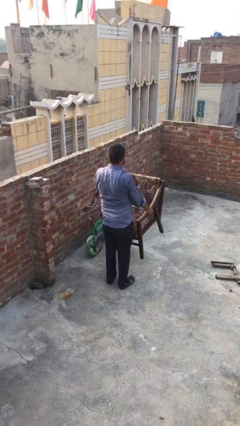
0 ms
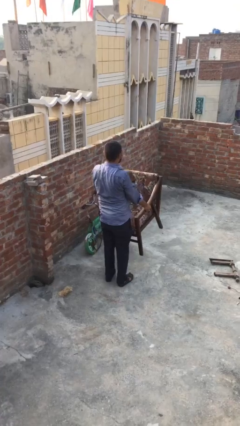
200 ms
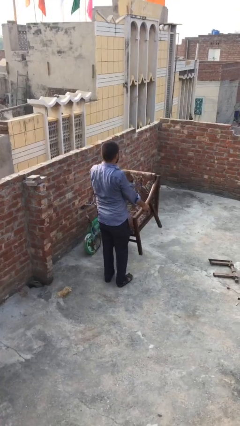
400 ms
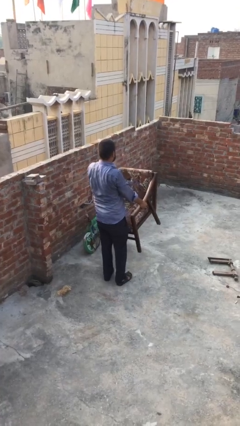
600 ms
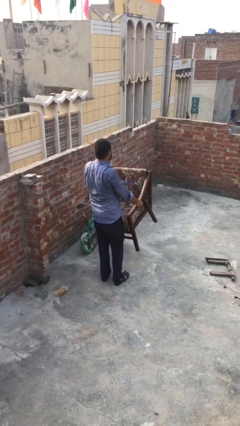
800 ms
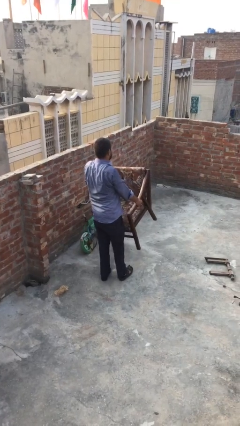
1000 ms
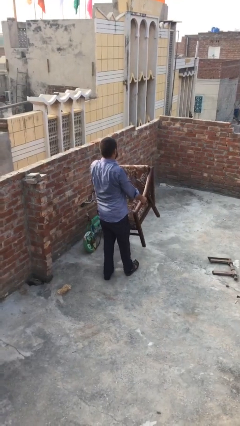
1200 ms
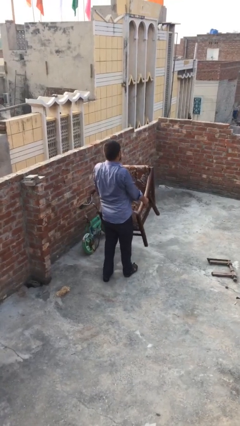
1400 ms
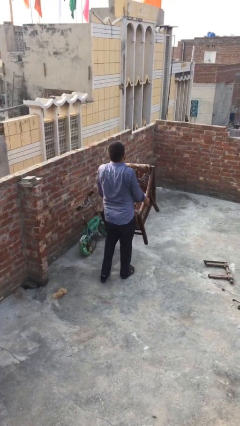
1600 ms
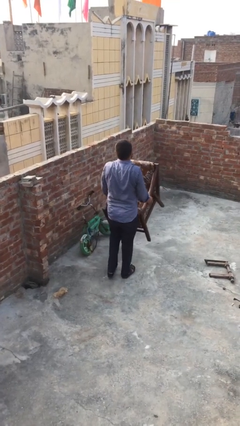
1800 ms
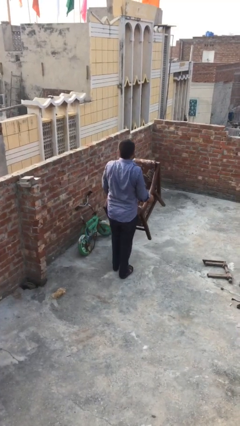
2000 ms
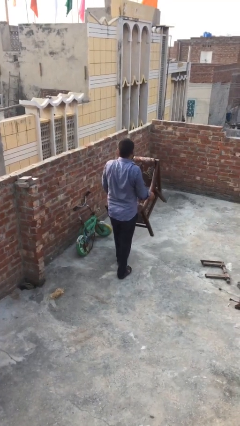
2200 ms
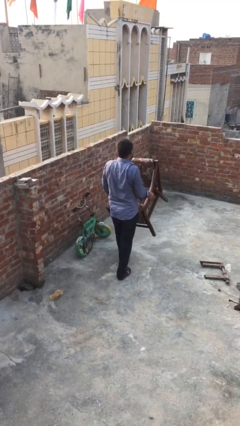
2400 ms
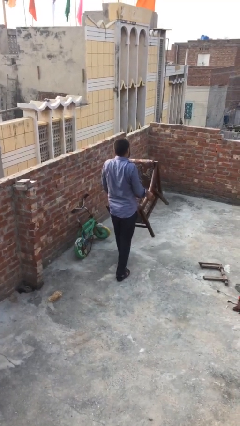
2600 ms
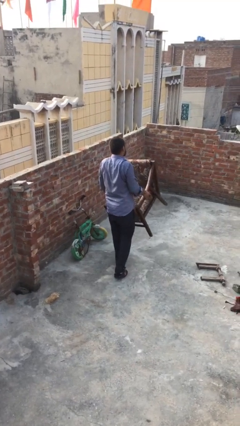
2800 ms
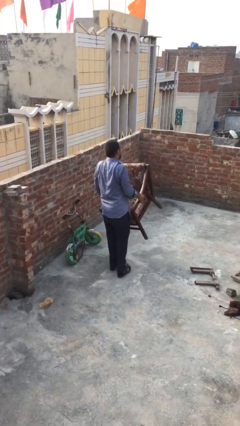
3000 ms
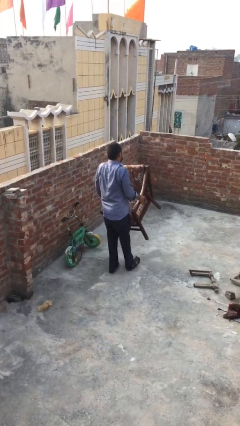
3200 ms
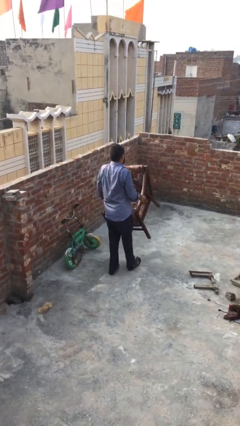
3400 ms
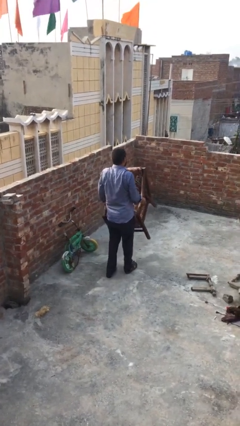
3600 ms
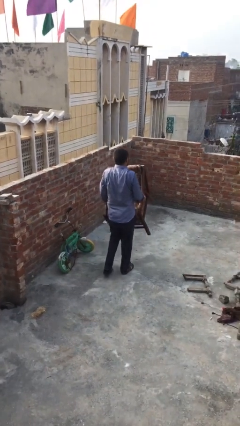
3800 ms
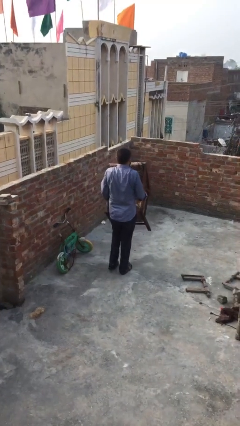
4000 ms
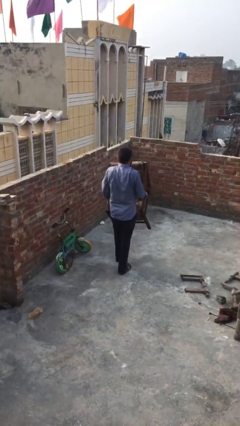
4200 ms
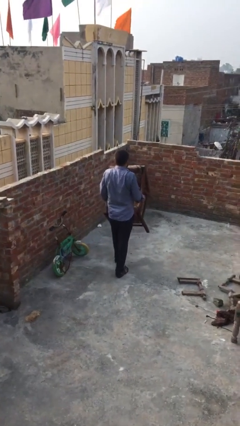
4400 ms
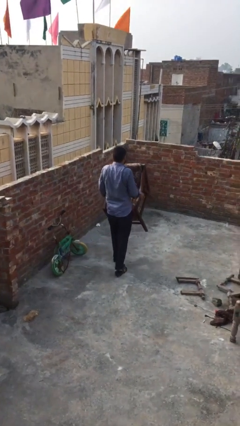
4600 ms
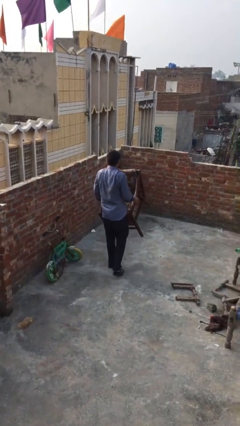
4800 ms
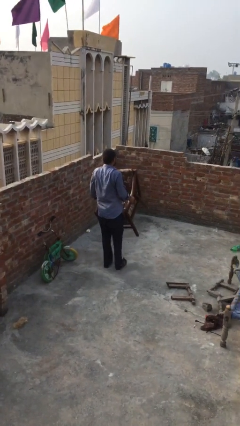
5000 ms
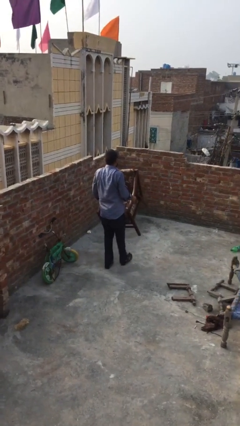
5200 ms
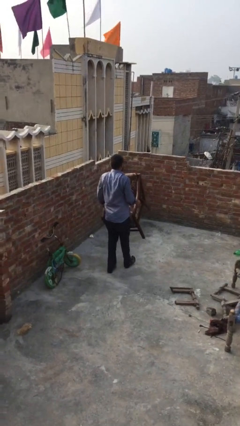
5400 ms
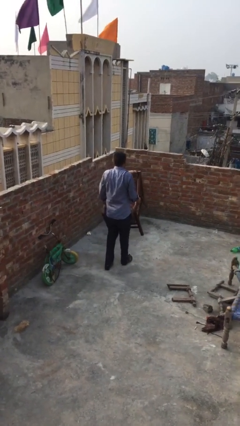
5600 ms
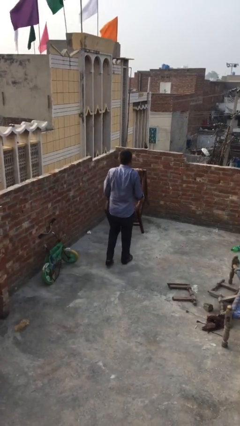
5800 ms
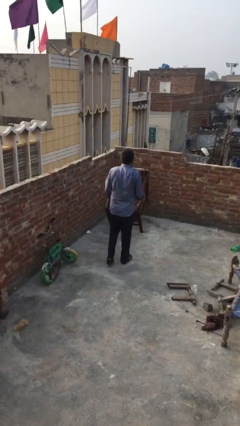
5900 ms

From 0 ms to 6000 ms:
person carries heavy object

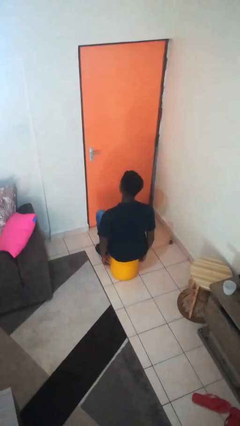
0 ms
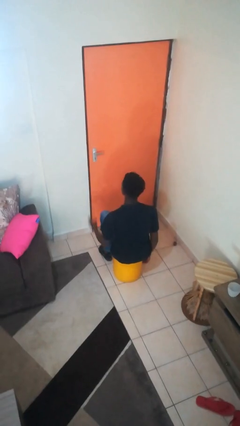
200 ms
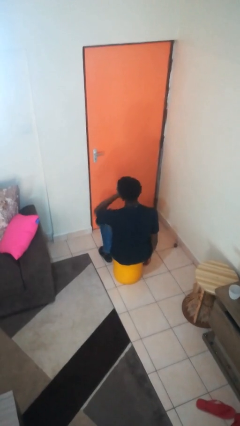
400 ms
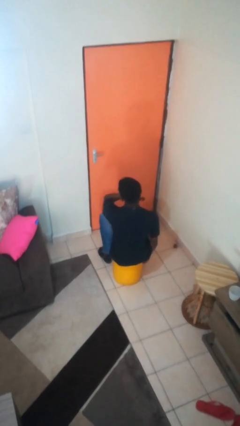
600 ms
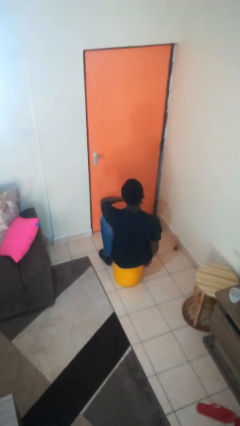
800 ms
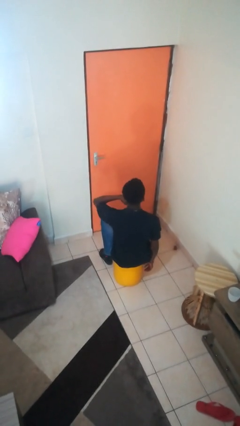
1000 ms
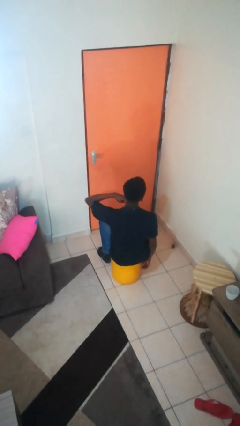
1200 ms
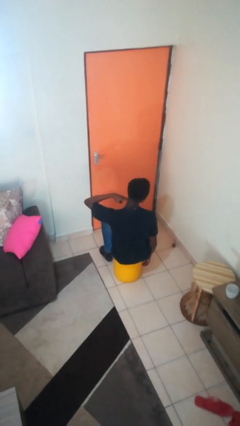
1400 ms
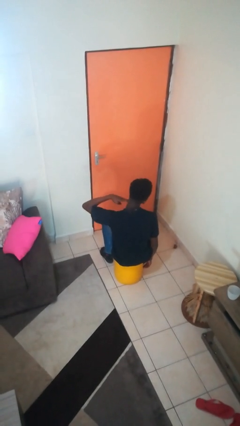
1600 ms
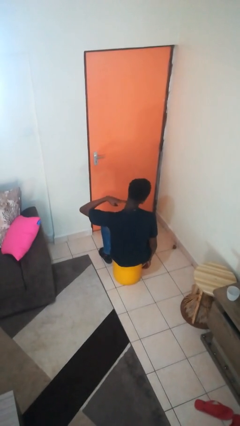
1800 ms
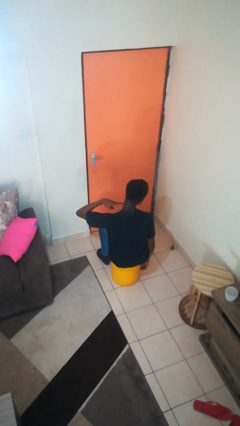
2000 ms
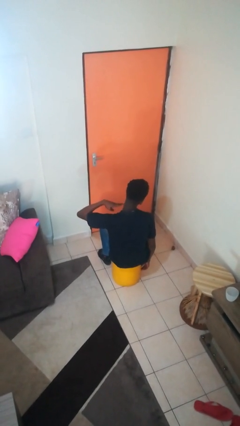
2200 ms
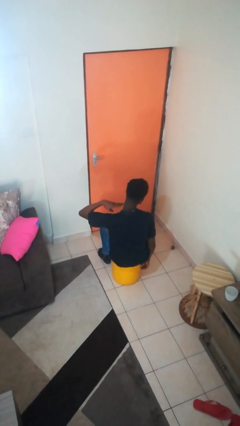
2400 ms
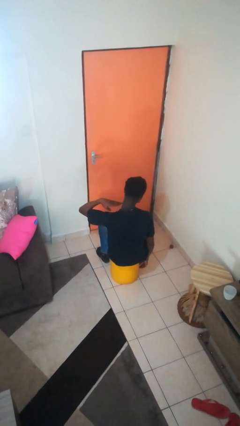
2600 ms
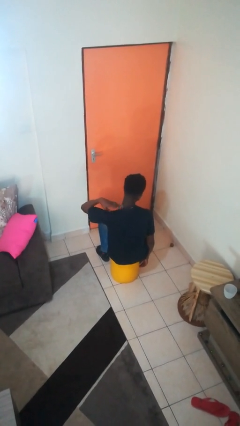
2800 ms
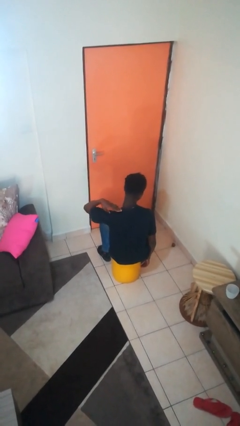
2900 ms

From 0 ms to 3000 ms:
person gestures cut

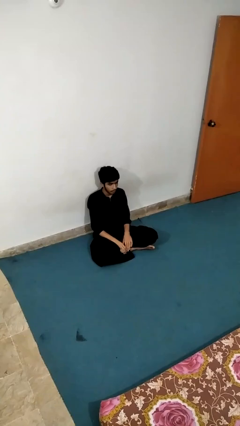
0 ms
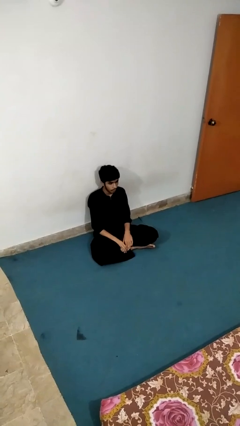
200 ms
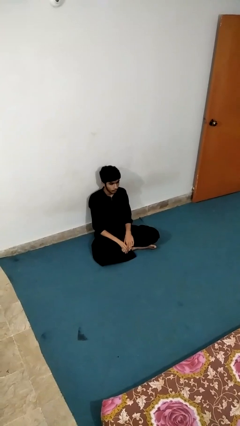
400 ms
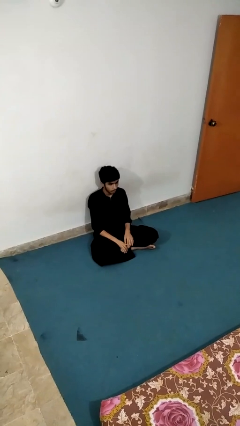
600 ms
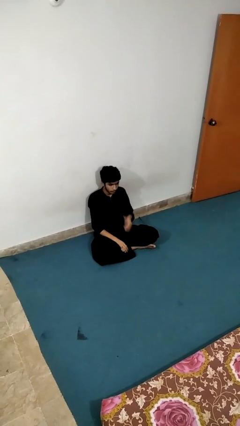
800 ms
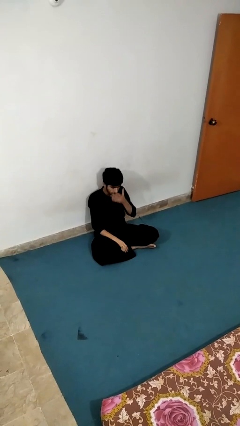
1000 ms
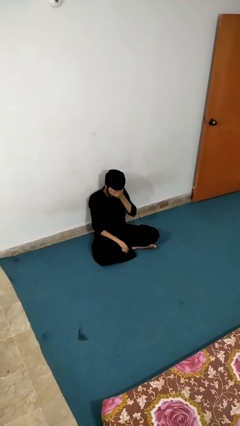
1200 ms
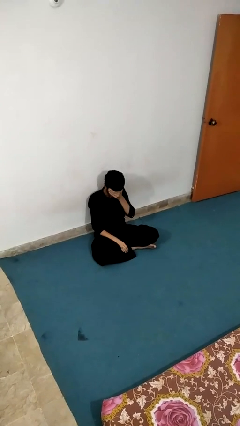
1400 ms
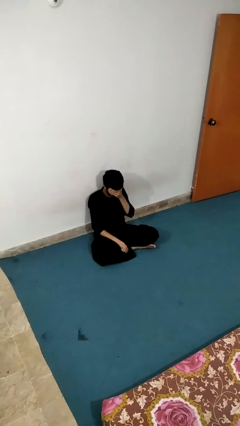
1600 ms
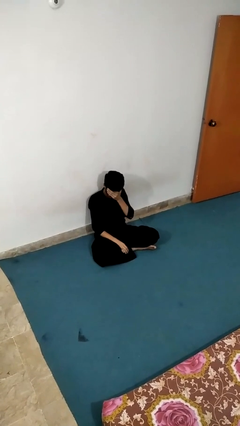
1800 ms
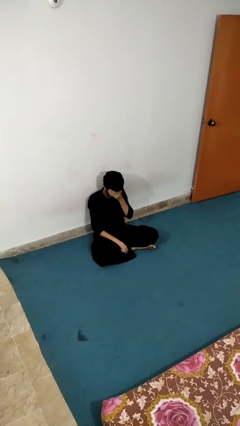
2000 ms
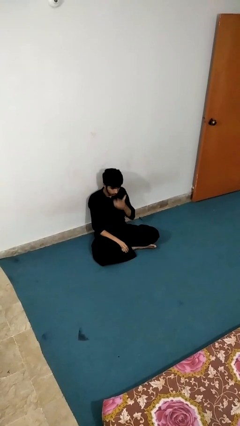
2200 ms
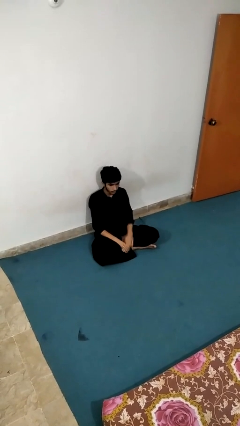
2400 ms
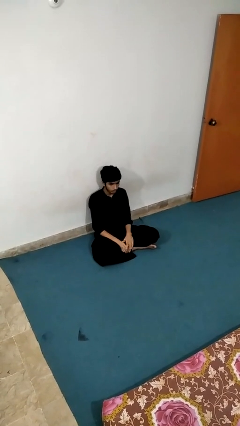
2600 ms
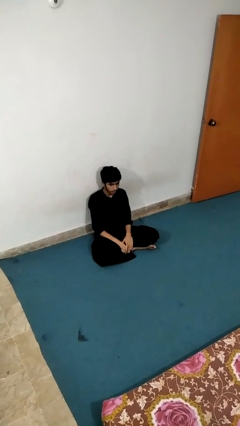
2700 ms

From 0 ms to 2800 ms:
person covers face with hands

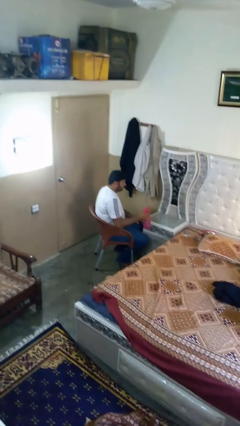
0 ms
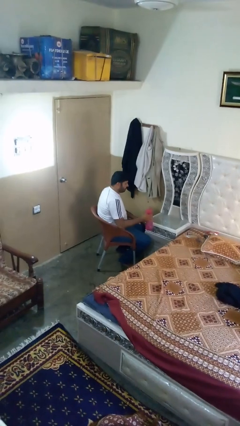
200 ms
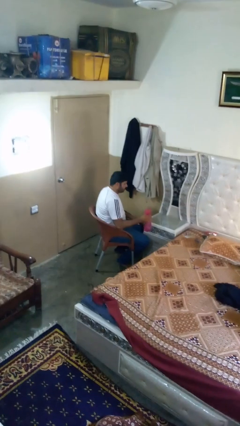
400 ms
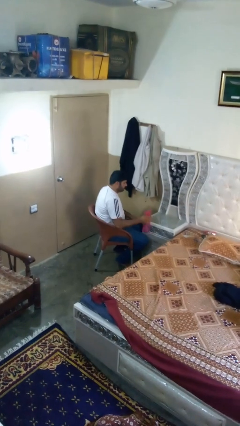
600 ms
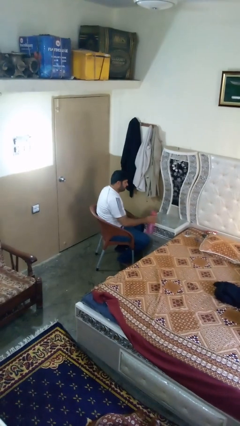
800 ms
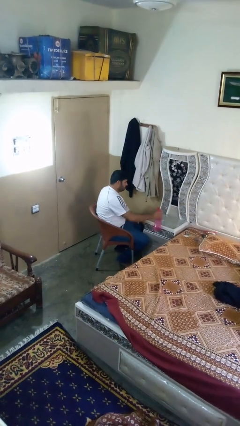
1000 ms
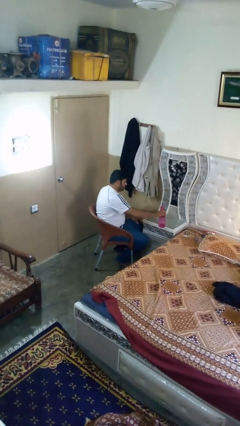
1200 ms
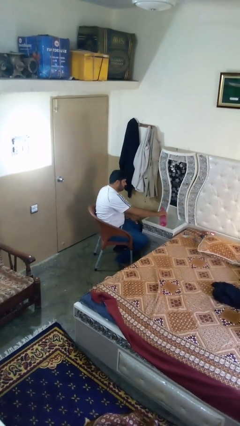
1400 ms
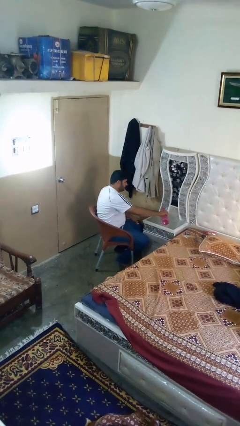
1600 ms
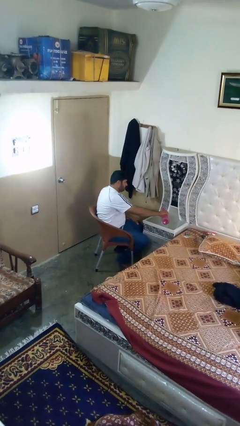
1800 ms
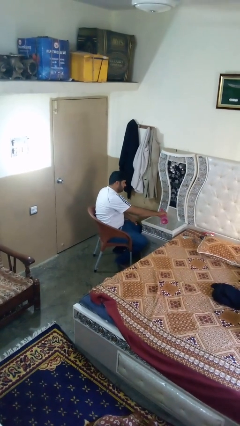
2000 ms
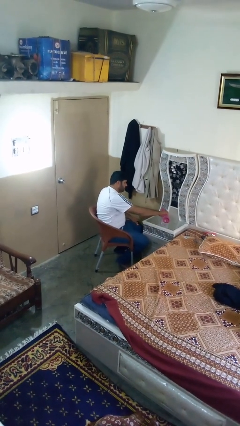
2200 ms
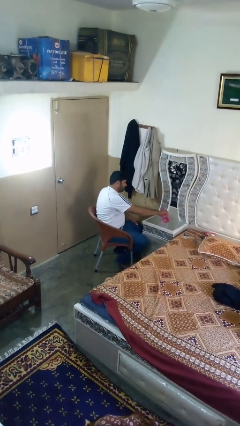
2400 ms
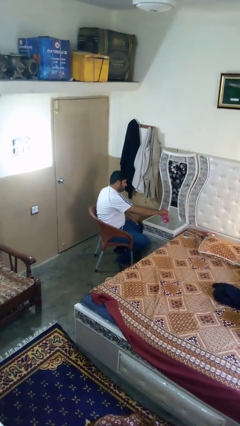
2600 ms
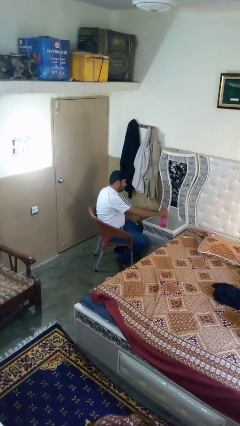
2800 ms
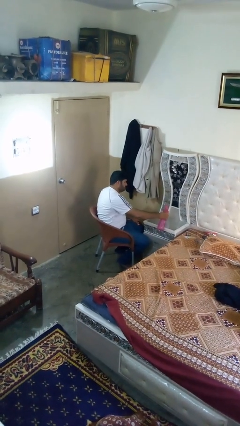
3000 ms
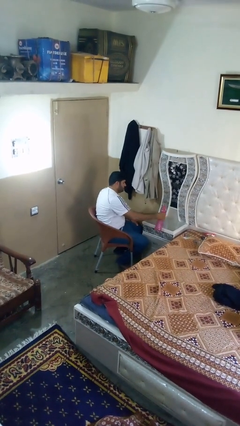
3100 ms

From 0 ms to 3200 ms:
person pours liquid into cup

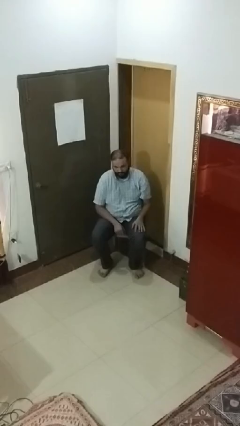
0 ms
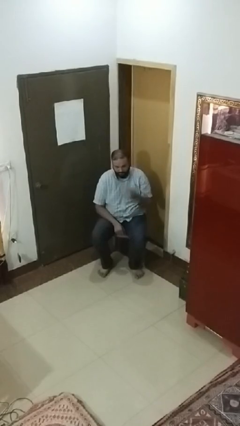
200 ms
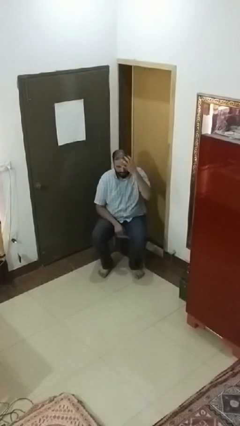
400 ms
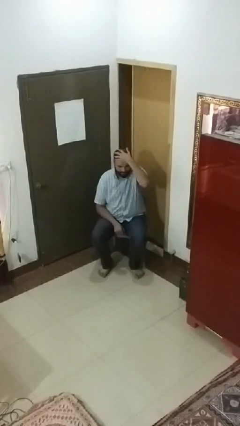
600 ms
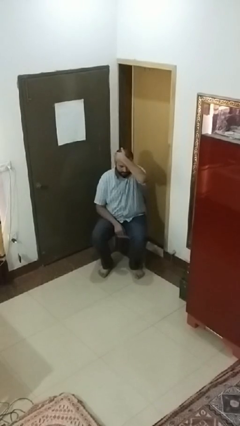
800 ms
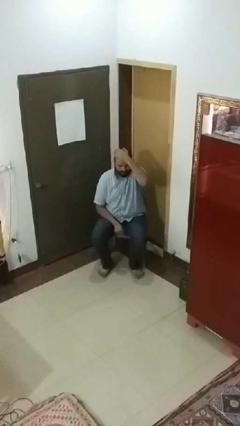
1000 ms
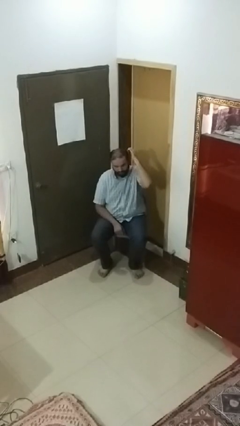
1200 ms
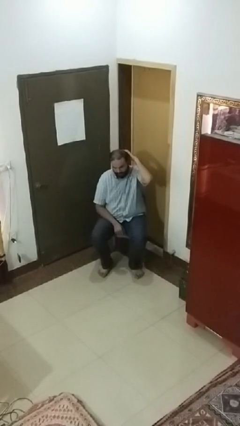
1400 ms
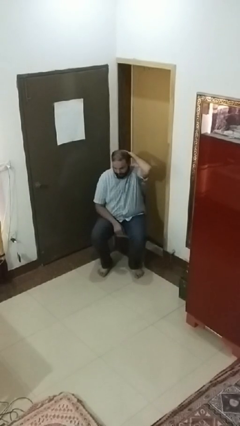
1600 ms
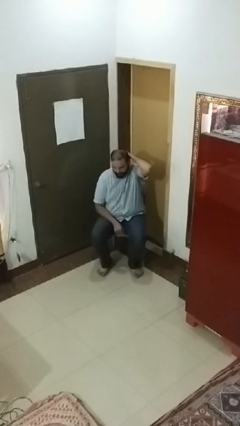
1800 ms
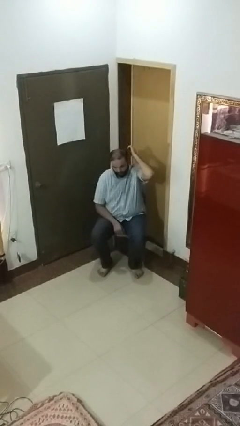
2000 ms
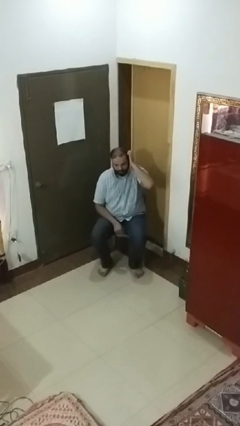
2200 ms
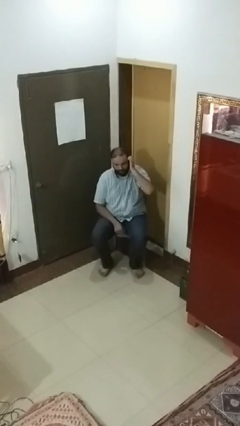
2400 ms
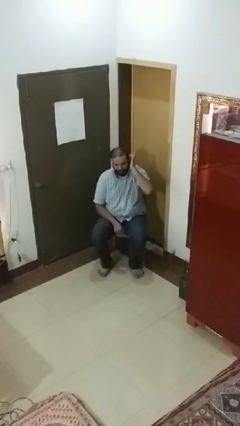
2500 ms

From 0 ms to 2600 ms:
person strokes hair

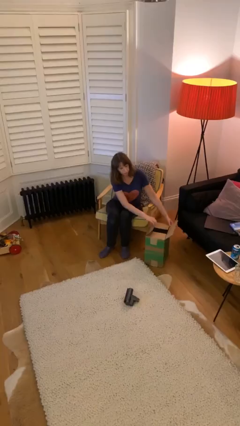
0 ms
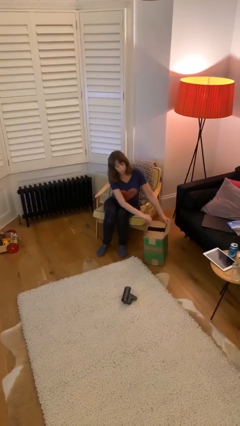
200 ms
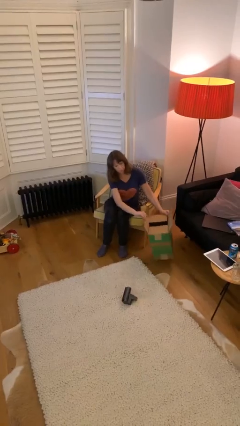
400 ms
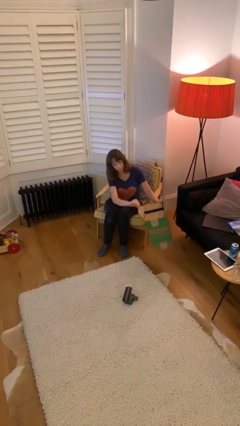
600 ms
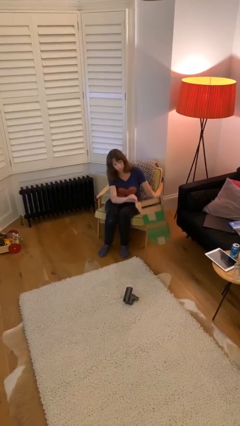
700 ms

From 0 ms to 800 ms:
person picks up object from floor
